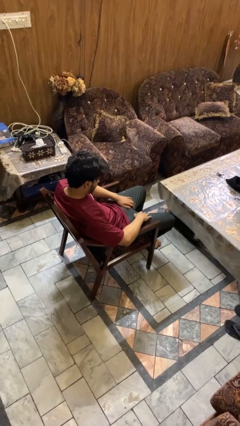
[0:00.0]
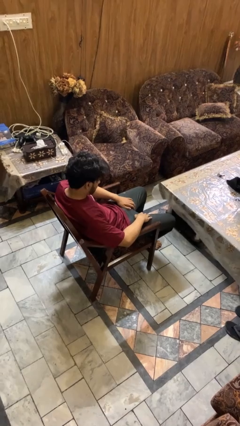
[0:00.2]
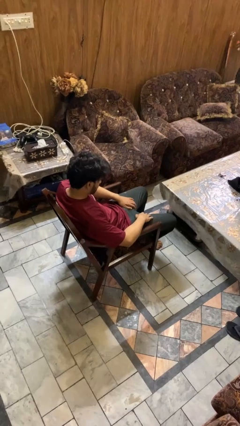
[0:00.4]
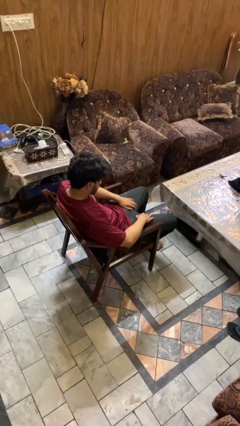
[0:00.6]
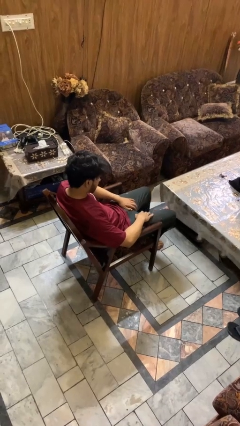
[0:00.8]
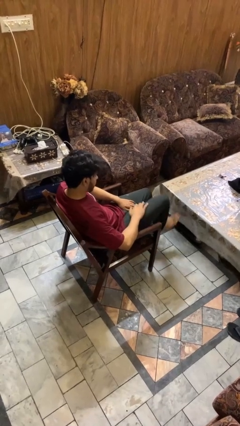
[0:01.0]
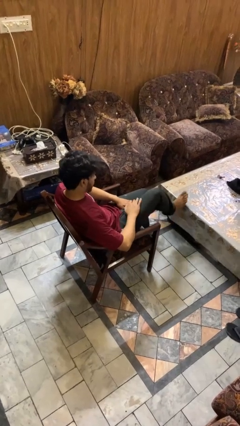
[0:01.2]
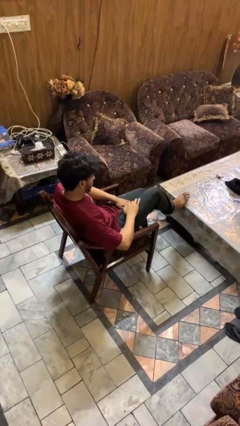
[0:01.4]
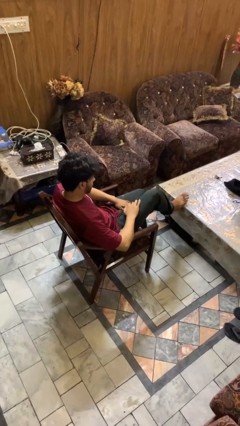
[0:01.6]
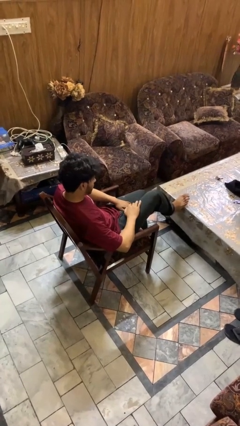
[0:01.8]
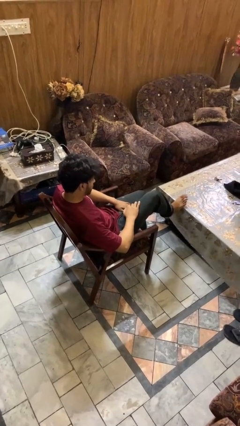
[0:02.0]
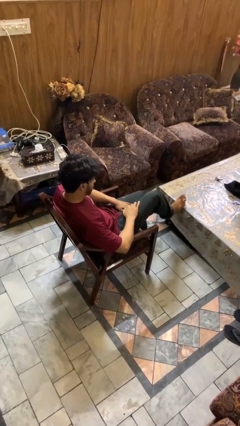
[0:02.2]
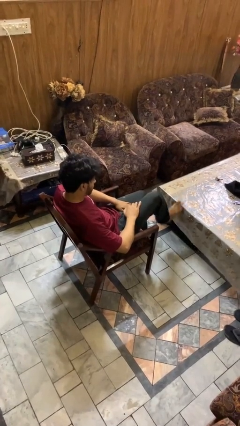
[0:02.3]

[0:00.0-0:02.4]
person puts feet up

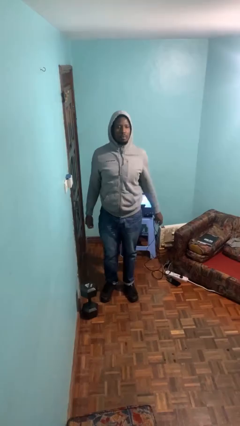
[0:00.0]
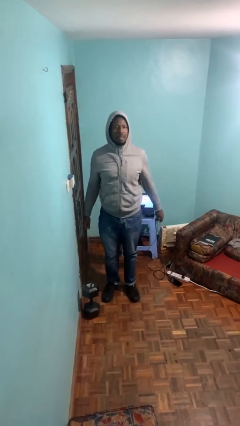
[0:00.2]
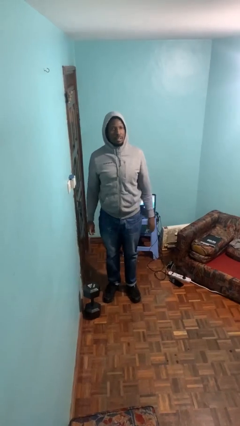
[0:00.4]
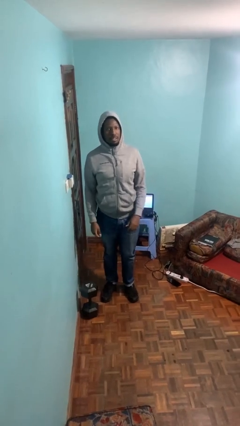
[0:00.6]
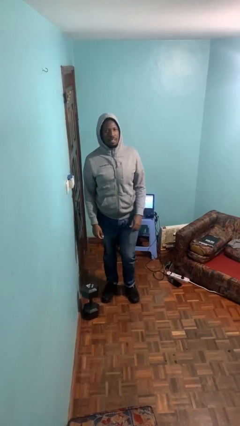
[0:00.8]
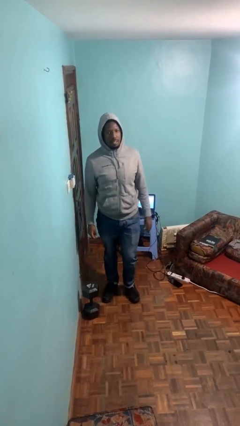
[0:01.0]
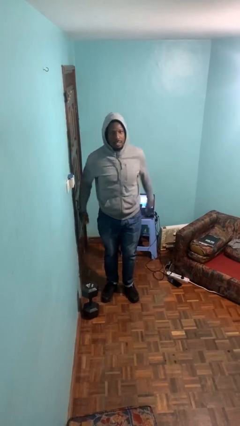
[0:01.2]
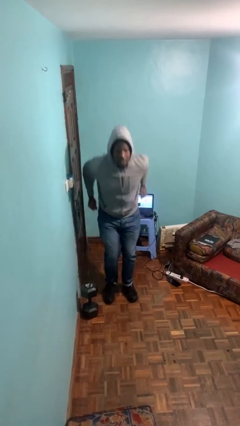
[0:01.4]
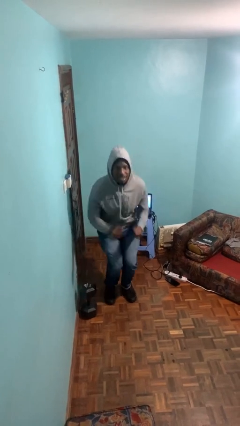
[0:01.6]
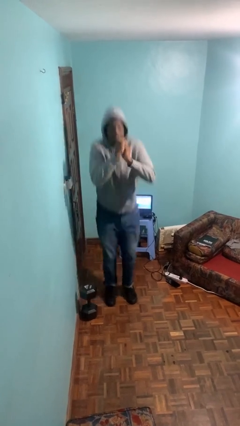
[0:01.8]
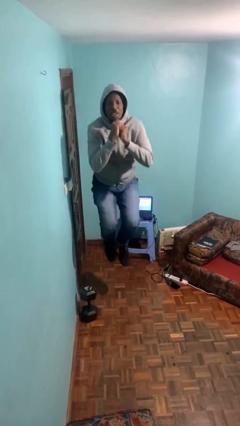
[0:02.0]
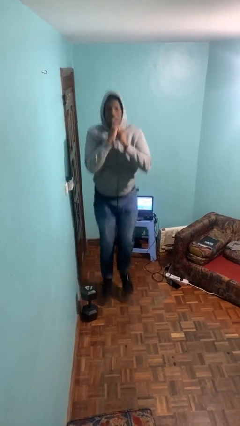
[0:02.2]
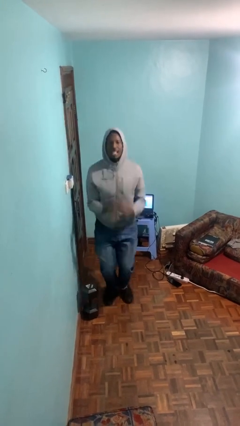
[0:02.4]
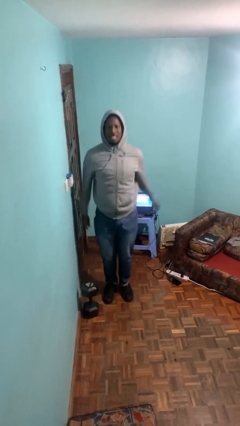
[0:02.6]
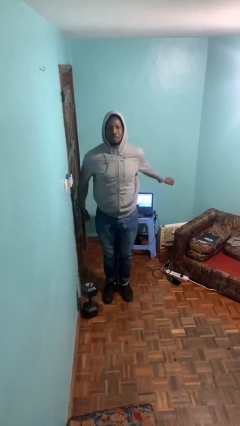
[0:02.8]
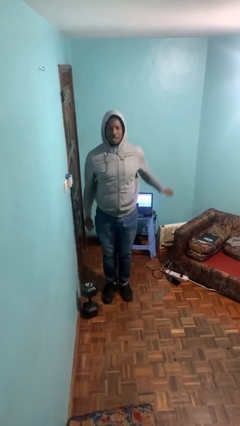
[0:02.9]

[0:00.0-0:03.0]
person jumps

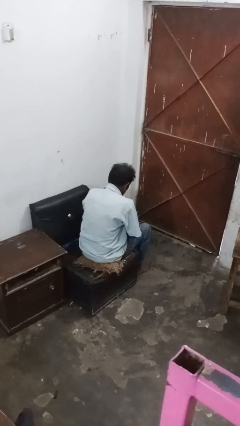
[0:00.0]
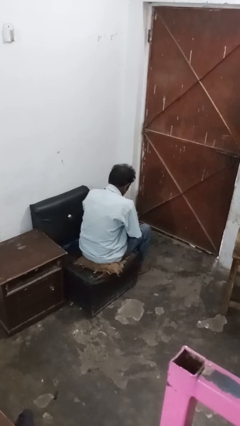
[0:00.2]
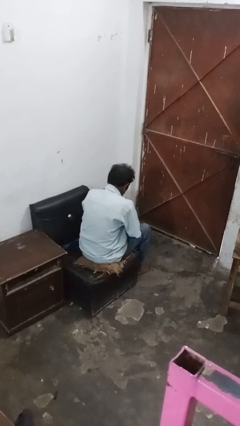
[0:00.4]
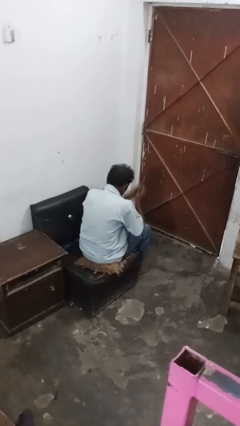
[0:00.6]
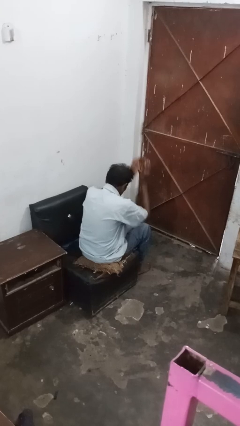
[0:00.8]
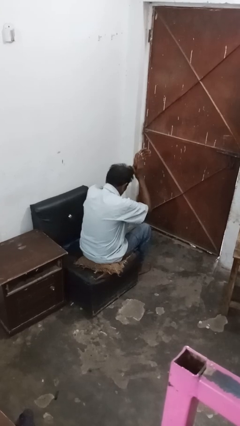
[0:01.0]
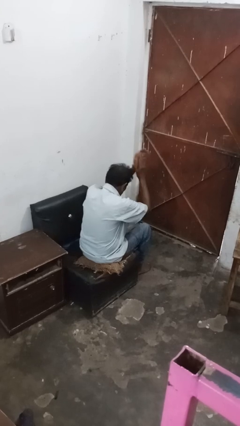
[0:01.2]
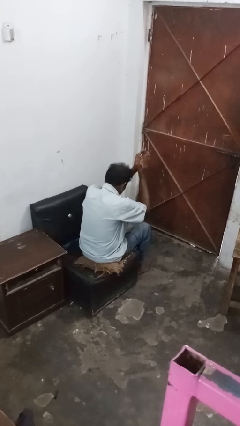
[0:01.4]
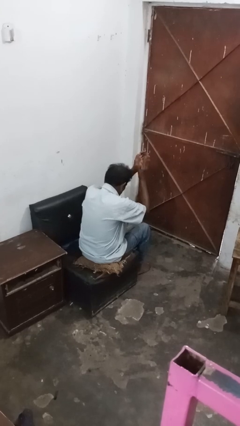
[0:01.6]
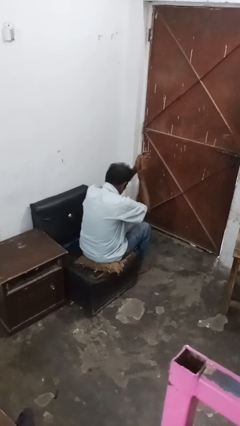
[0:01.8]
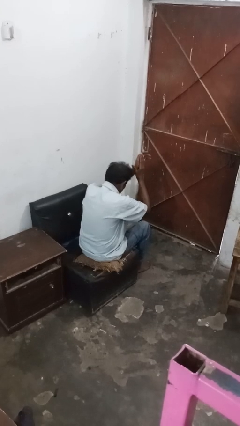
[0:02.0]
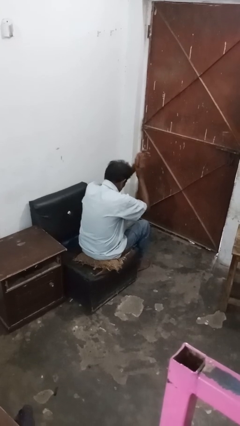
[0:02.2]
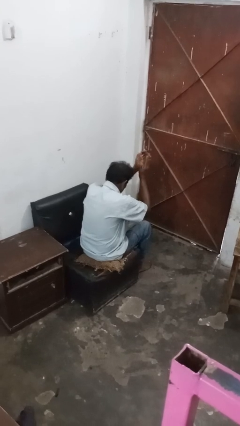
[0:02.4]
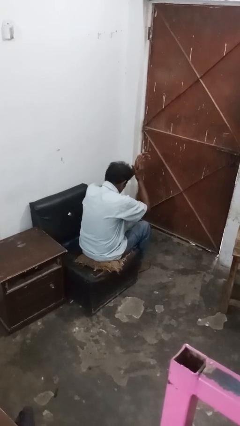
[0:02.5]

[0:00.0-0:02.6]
person claps hands

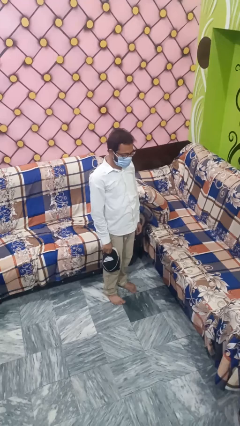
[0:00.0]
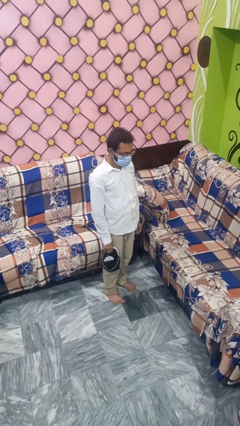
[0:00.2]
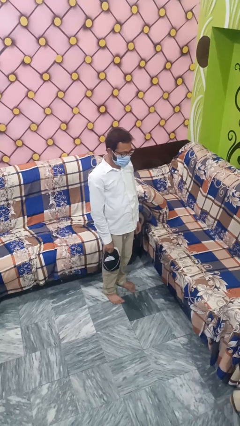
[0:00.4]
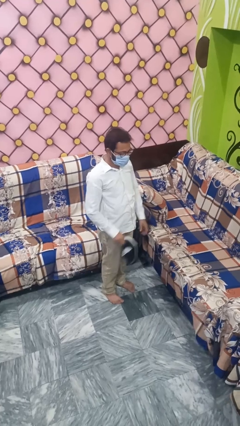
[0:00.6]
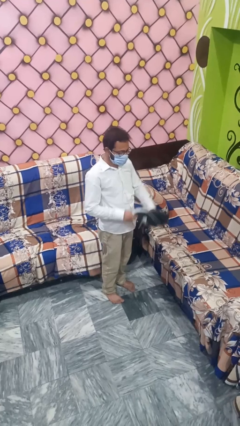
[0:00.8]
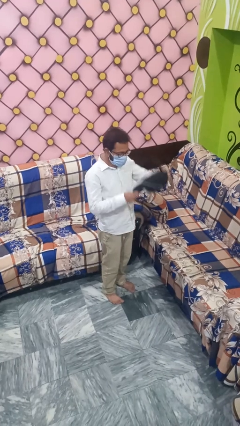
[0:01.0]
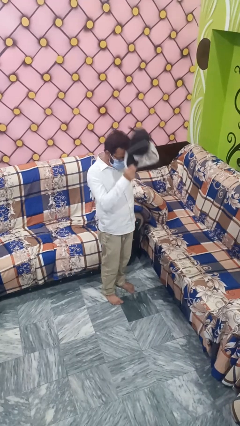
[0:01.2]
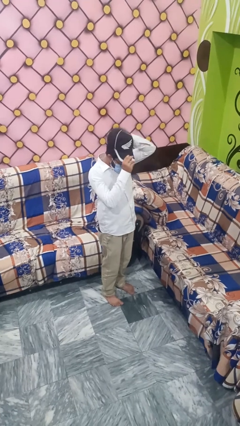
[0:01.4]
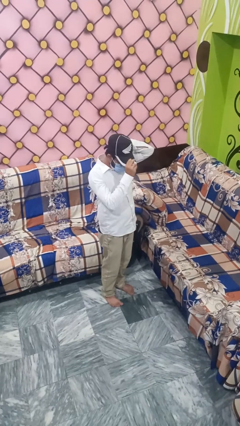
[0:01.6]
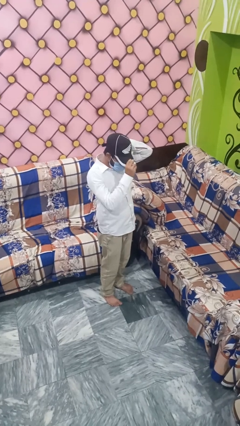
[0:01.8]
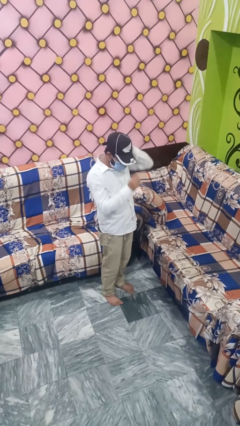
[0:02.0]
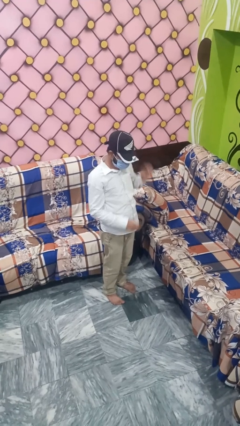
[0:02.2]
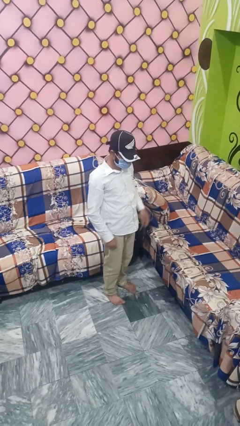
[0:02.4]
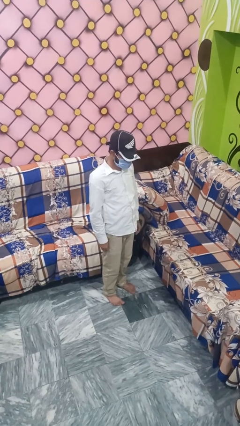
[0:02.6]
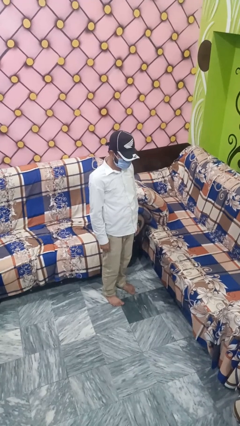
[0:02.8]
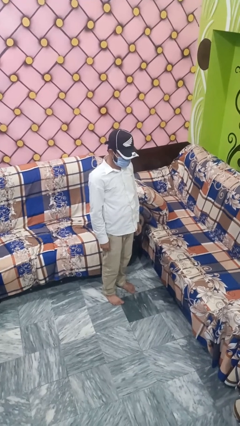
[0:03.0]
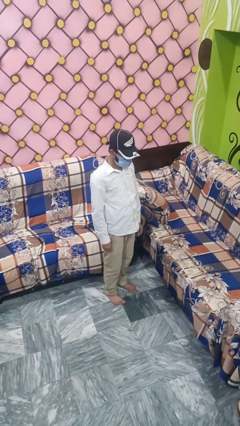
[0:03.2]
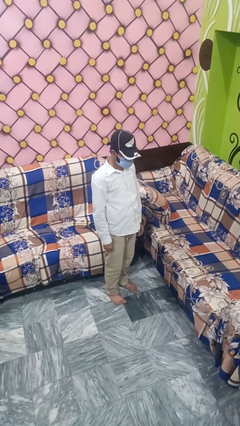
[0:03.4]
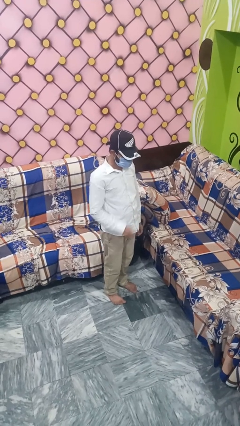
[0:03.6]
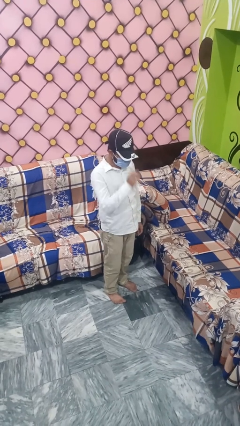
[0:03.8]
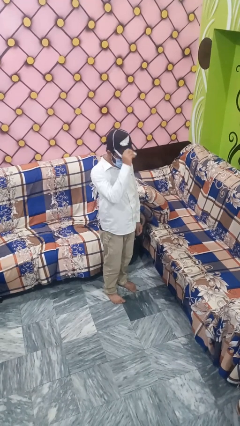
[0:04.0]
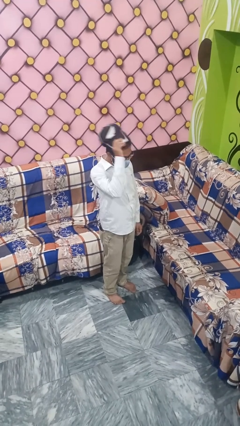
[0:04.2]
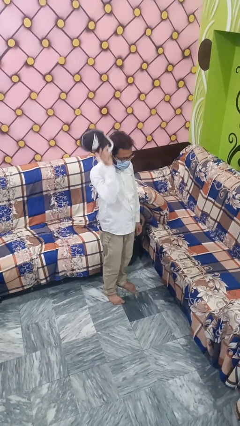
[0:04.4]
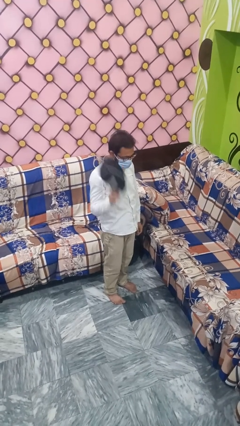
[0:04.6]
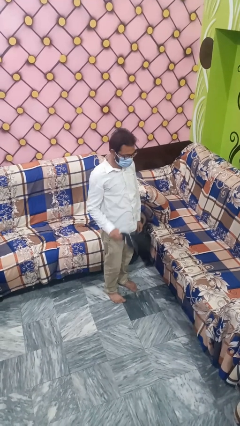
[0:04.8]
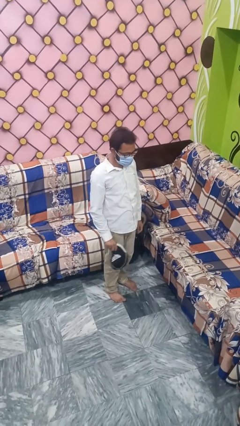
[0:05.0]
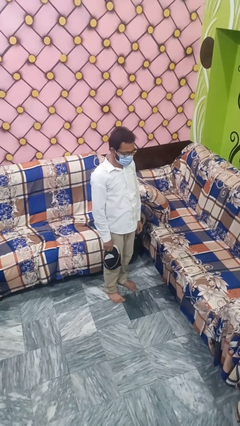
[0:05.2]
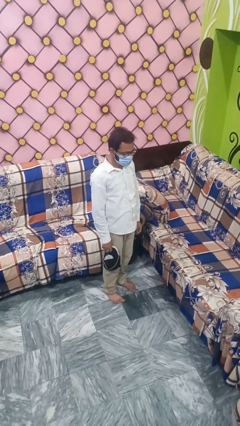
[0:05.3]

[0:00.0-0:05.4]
person puts on hat

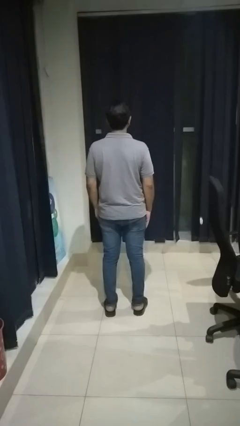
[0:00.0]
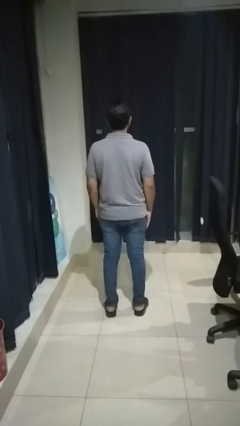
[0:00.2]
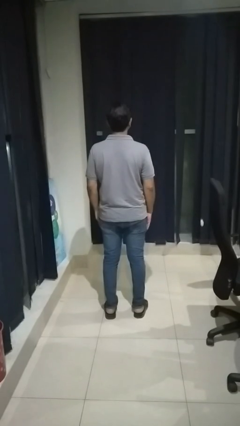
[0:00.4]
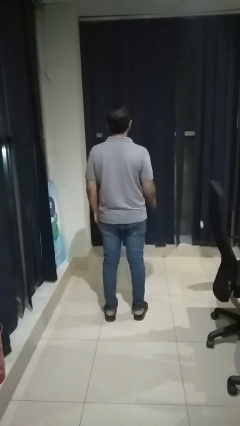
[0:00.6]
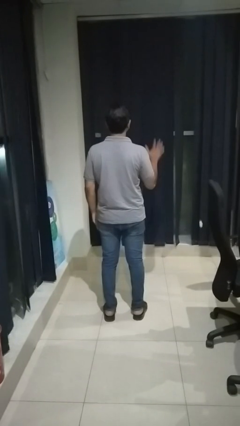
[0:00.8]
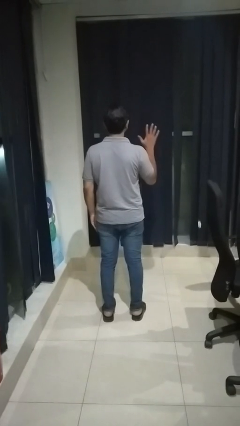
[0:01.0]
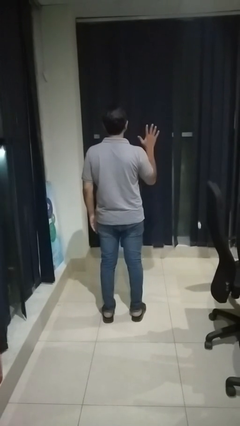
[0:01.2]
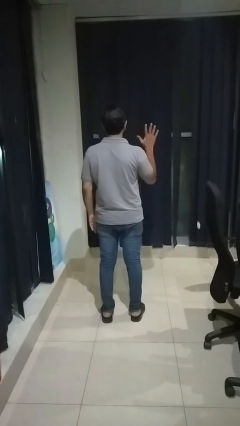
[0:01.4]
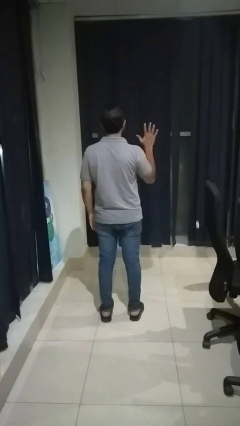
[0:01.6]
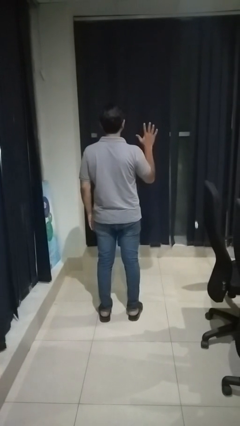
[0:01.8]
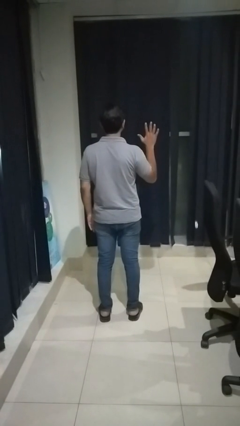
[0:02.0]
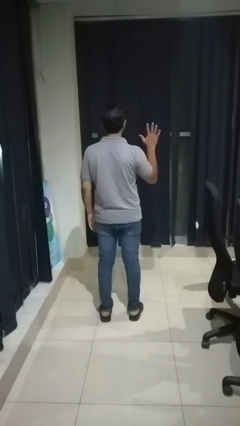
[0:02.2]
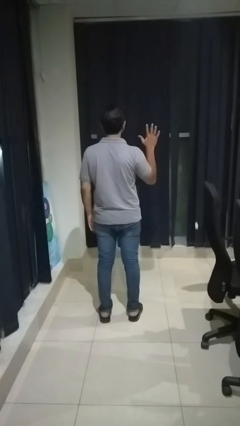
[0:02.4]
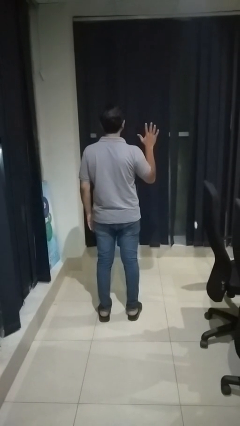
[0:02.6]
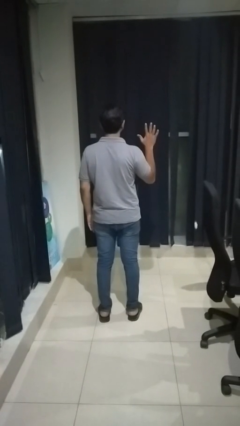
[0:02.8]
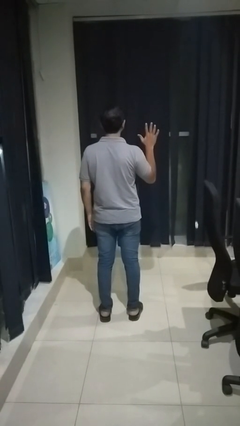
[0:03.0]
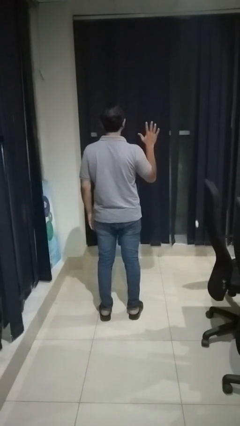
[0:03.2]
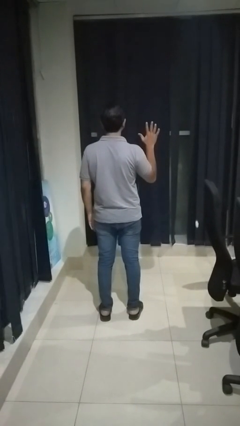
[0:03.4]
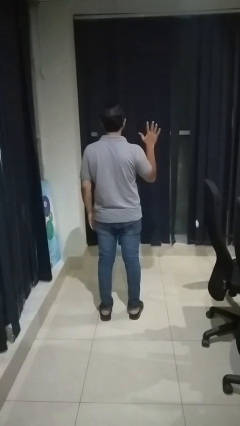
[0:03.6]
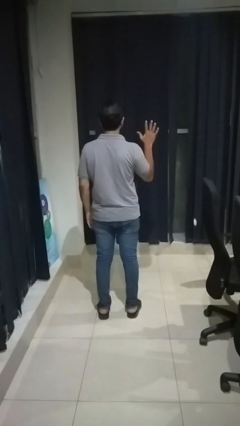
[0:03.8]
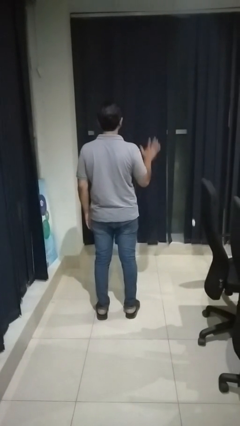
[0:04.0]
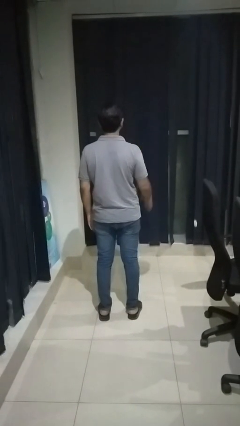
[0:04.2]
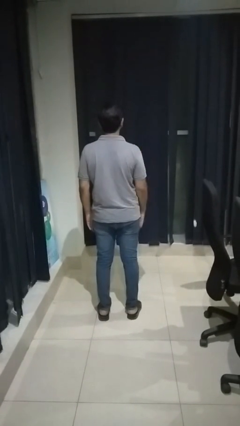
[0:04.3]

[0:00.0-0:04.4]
person gestures number five
